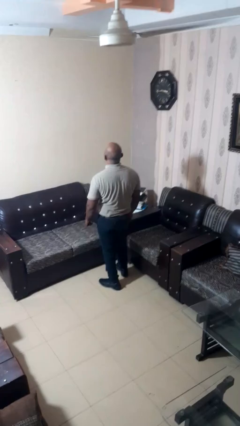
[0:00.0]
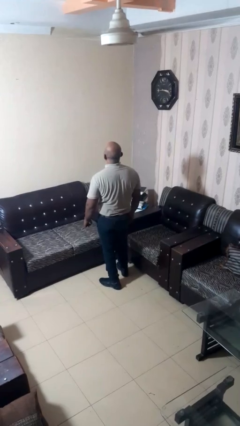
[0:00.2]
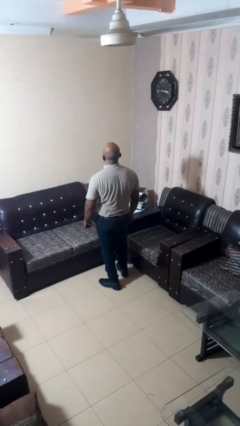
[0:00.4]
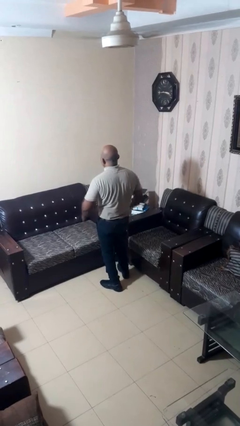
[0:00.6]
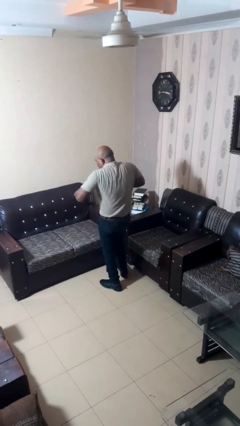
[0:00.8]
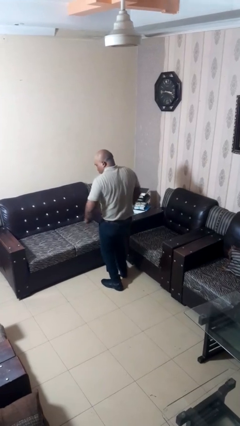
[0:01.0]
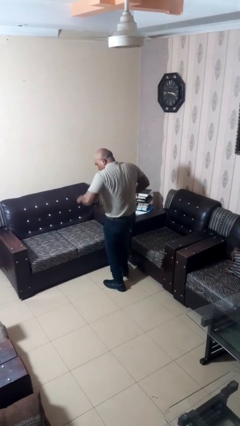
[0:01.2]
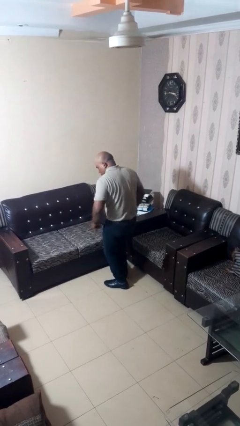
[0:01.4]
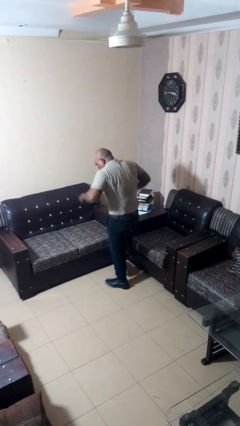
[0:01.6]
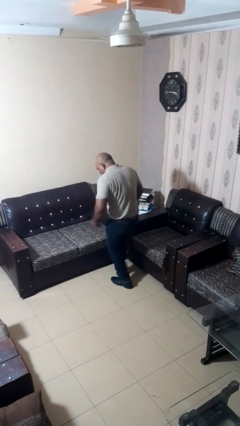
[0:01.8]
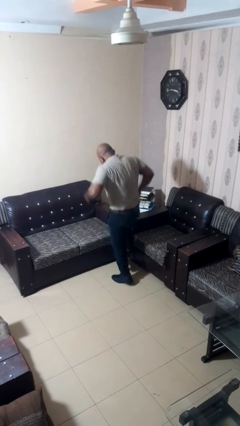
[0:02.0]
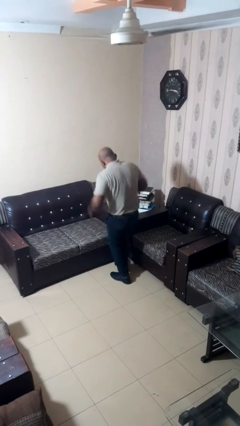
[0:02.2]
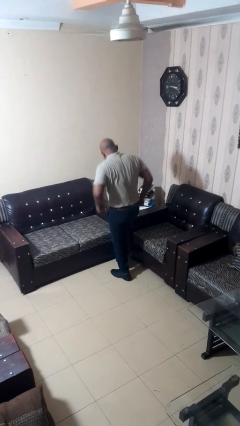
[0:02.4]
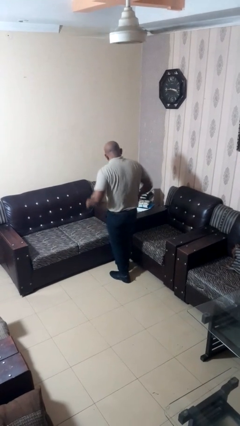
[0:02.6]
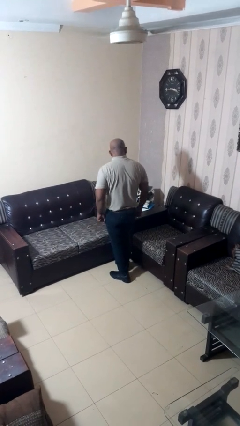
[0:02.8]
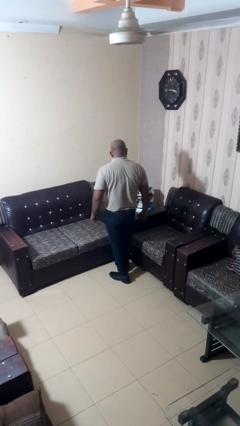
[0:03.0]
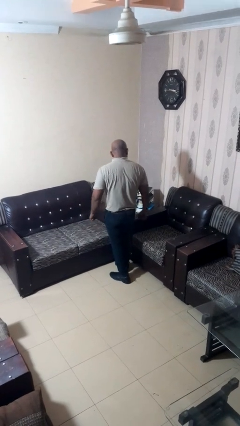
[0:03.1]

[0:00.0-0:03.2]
person dances in place

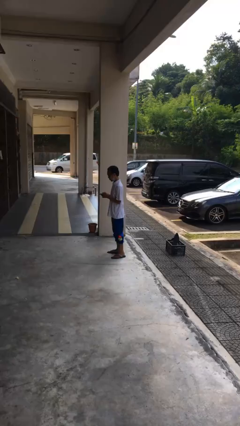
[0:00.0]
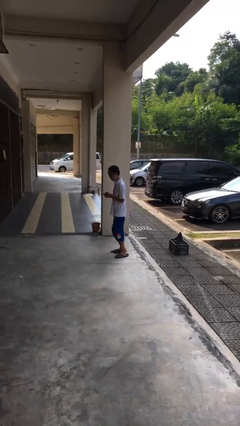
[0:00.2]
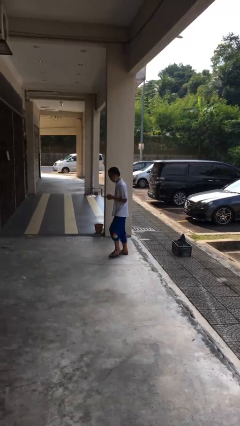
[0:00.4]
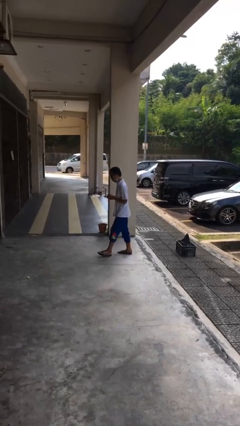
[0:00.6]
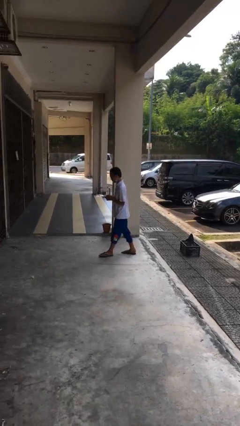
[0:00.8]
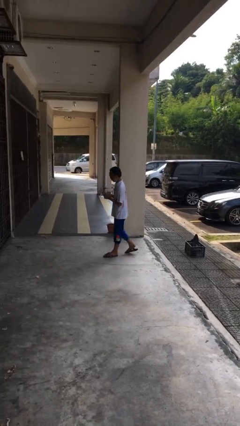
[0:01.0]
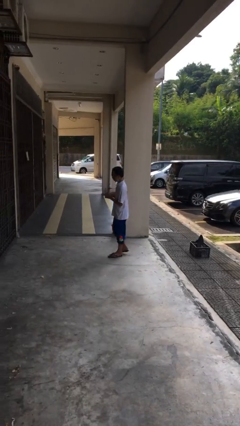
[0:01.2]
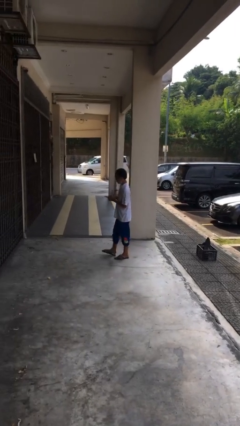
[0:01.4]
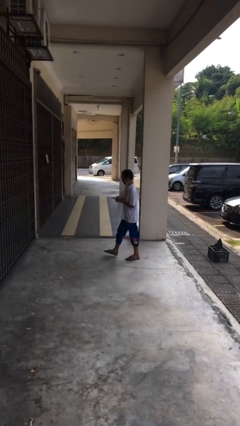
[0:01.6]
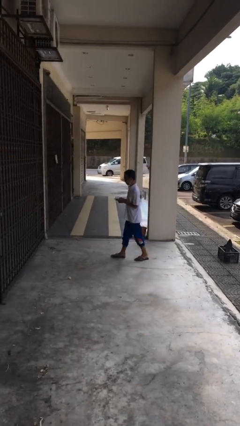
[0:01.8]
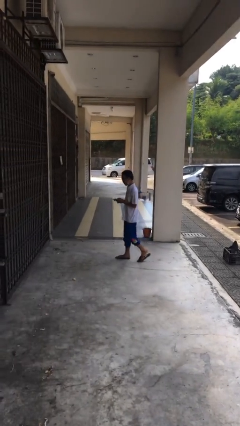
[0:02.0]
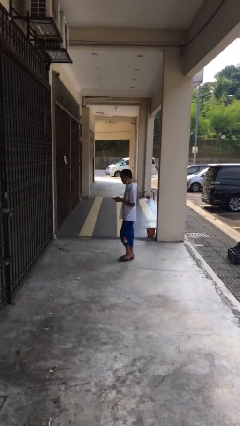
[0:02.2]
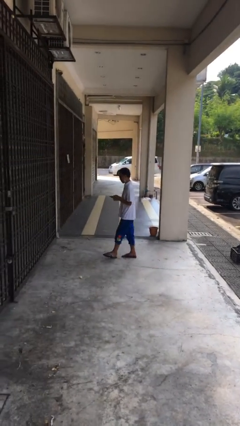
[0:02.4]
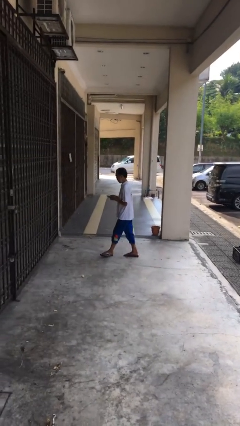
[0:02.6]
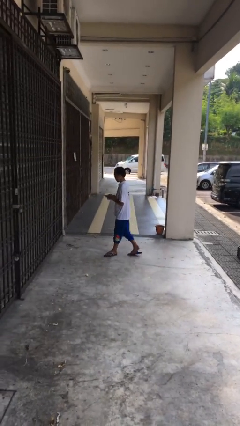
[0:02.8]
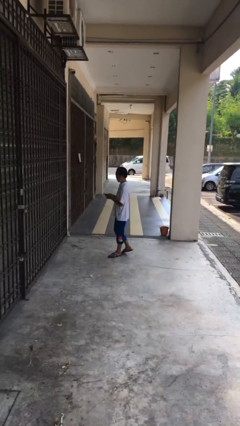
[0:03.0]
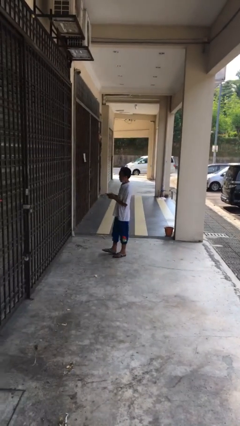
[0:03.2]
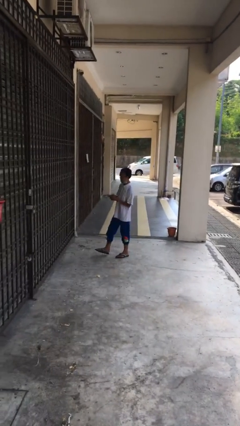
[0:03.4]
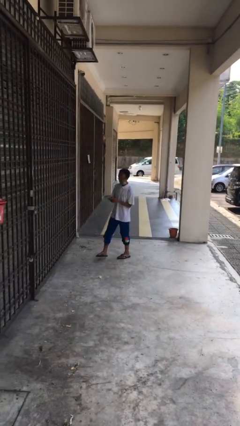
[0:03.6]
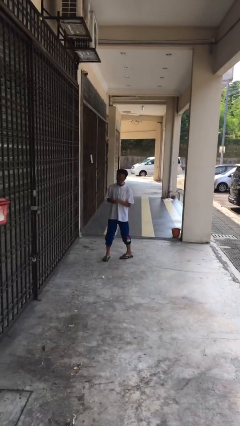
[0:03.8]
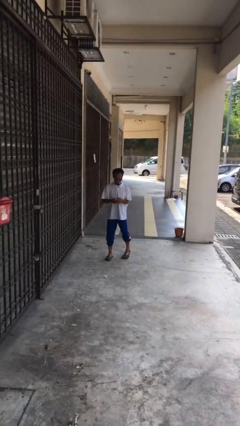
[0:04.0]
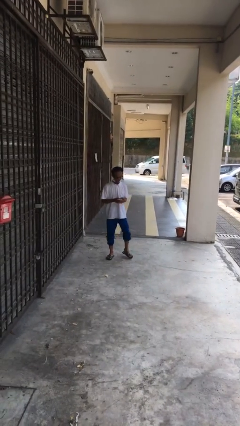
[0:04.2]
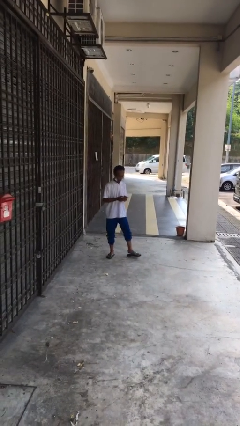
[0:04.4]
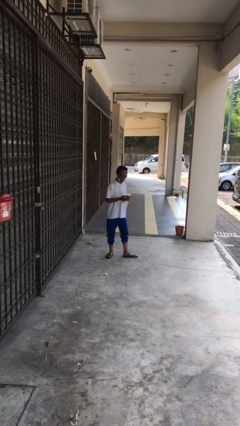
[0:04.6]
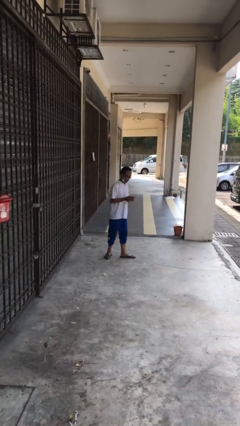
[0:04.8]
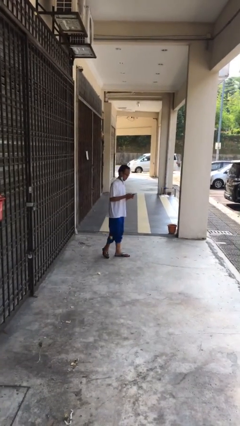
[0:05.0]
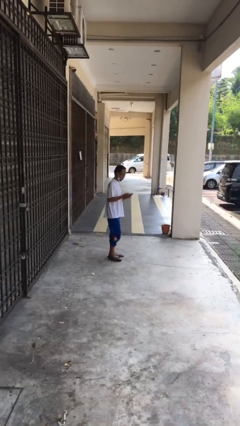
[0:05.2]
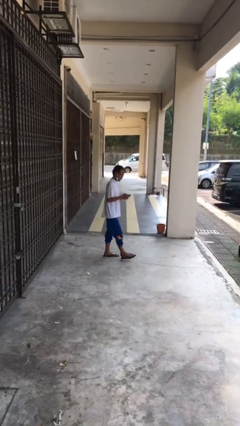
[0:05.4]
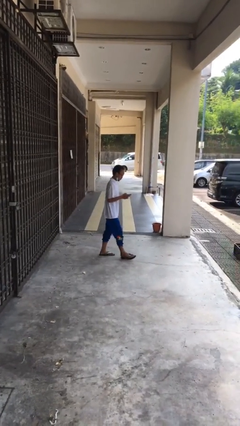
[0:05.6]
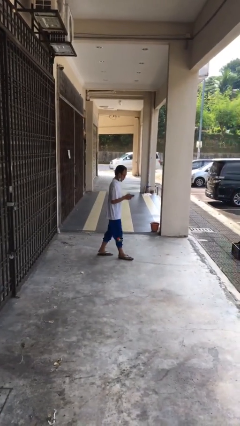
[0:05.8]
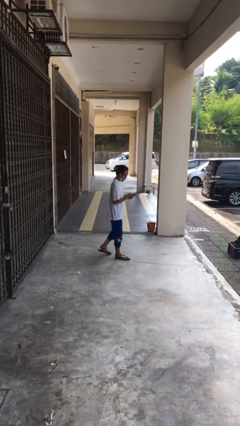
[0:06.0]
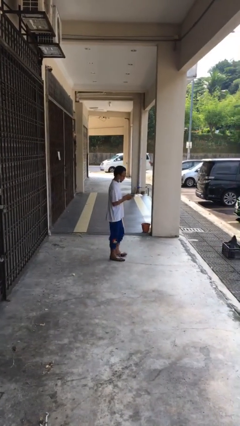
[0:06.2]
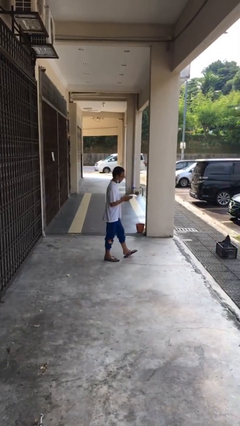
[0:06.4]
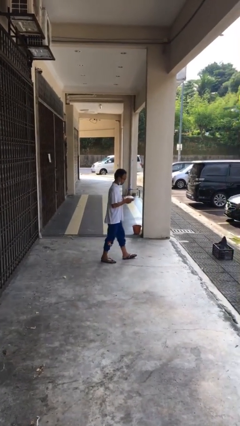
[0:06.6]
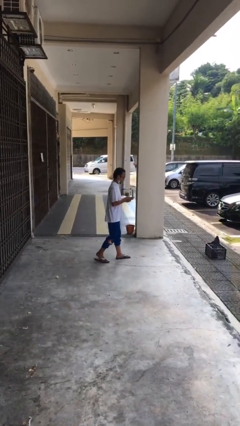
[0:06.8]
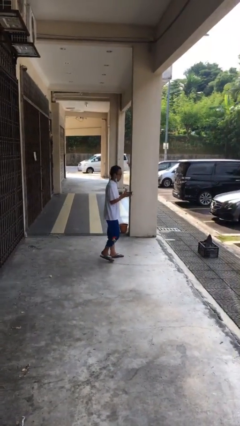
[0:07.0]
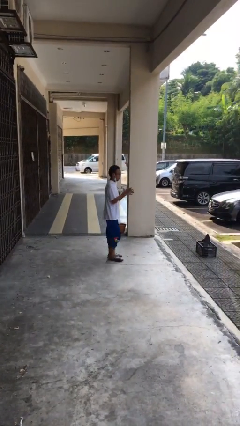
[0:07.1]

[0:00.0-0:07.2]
person texts on phone

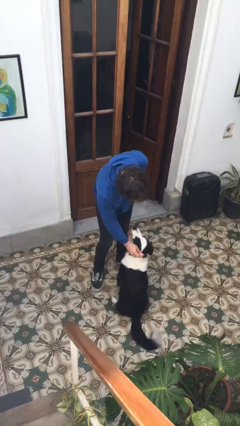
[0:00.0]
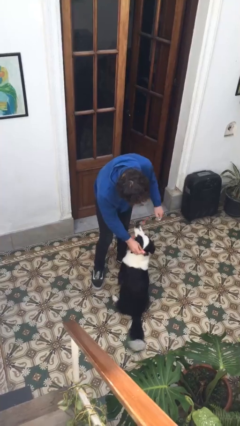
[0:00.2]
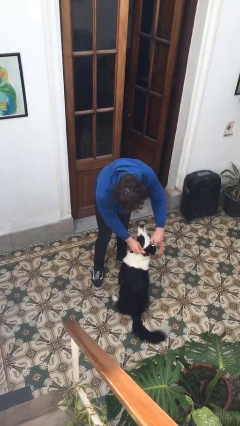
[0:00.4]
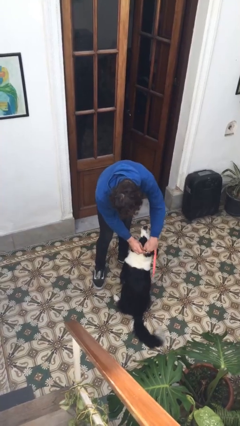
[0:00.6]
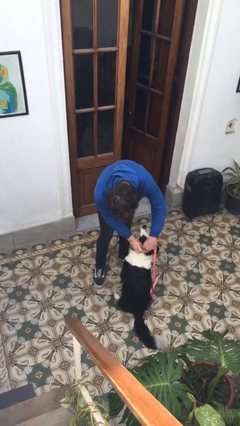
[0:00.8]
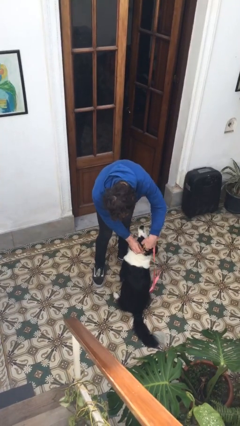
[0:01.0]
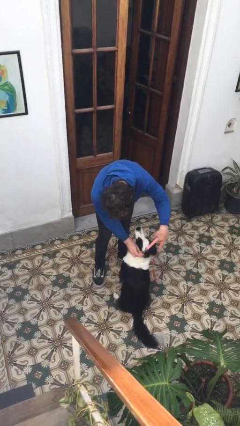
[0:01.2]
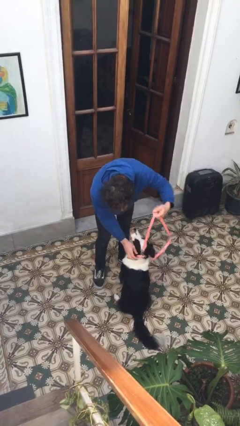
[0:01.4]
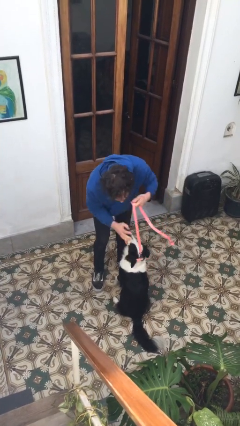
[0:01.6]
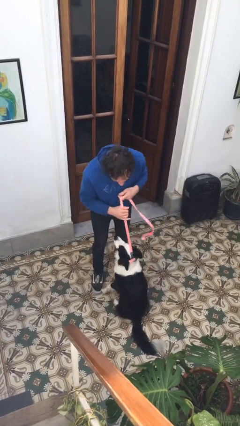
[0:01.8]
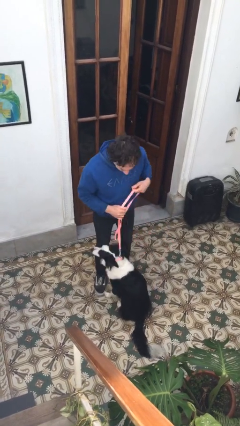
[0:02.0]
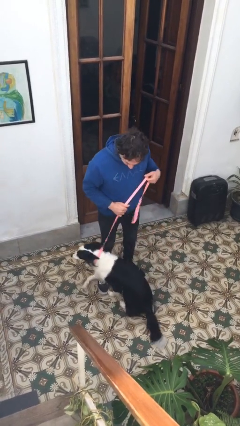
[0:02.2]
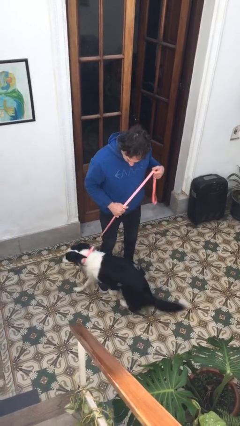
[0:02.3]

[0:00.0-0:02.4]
person attaches leash to dog

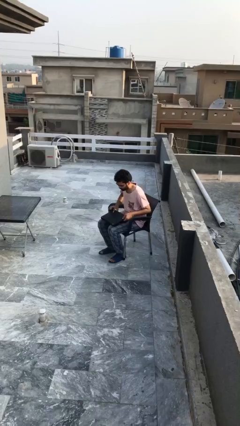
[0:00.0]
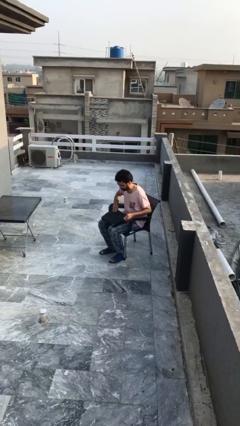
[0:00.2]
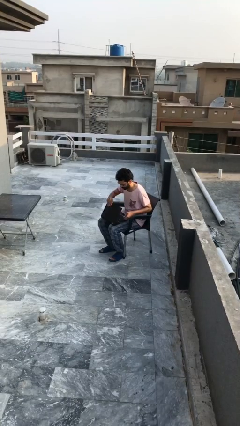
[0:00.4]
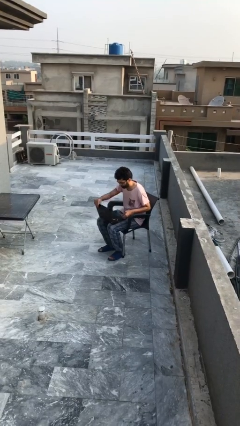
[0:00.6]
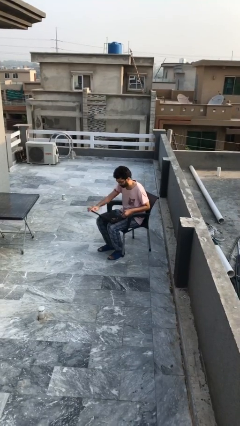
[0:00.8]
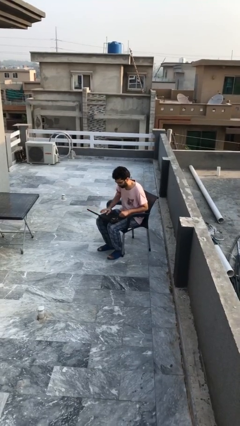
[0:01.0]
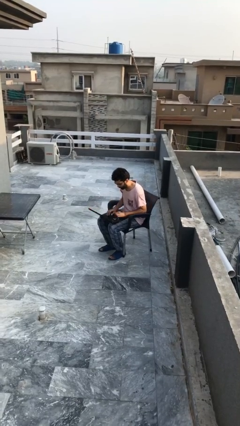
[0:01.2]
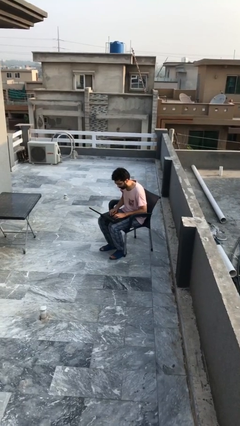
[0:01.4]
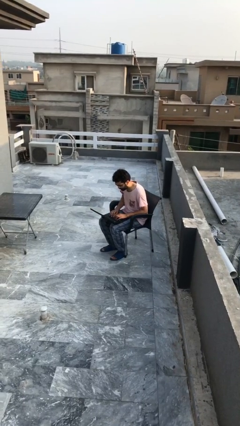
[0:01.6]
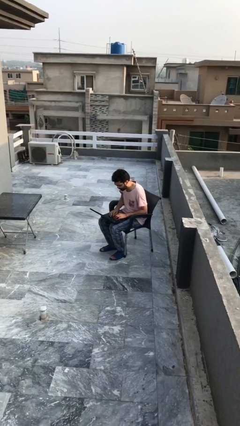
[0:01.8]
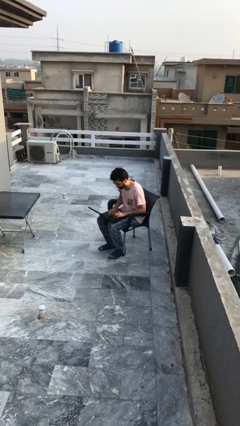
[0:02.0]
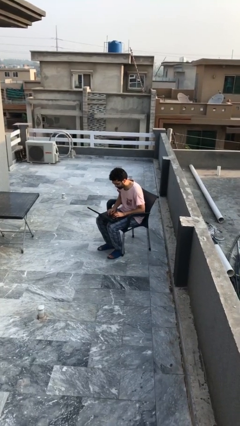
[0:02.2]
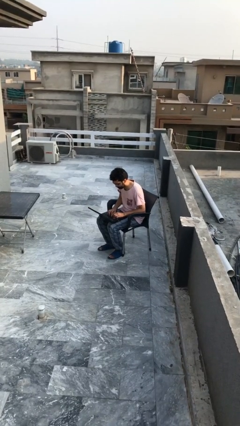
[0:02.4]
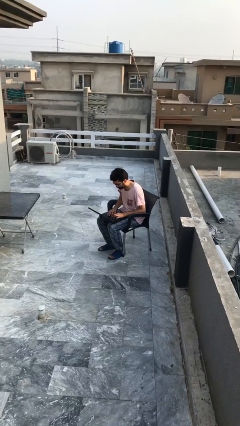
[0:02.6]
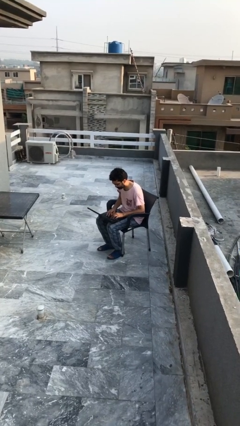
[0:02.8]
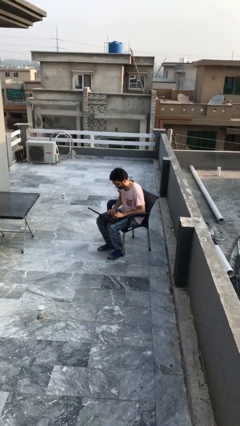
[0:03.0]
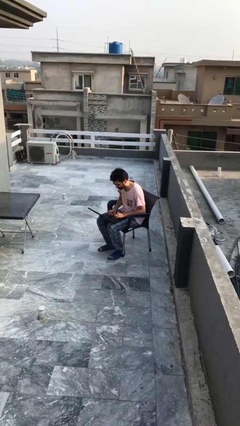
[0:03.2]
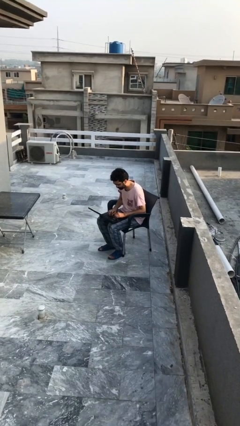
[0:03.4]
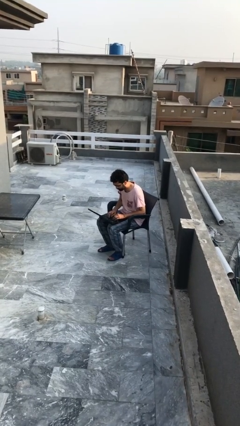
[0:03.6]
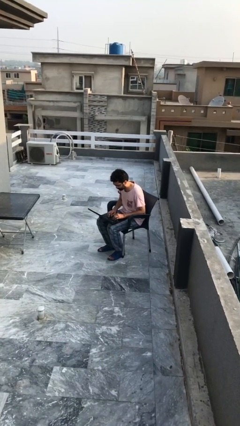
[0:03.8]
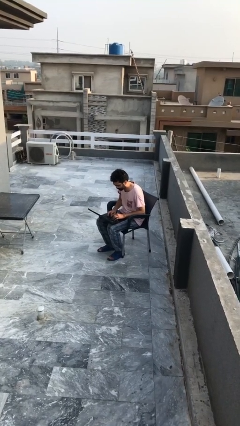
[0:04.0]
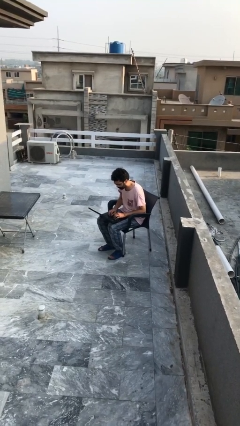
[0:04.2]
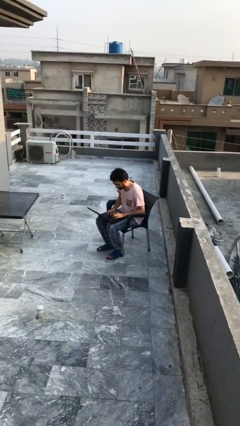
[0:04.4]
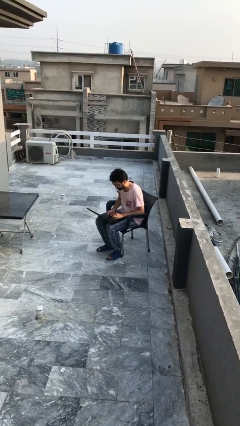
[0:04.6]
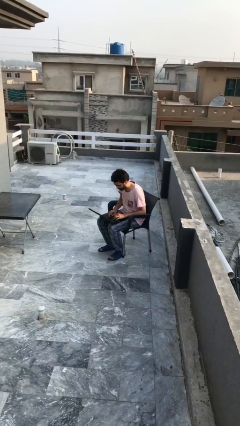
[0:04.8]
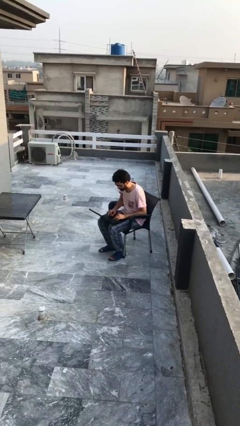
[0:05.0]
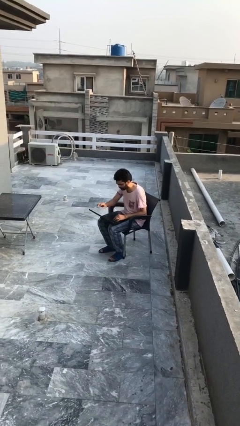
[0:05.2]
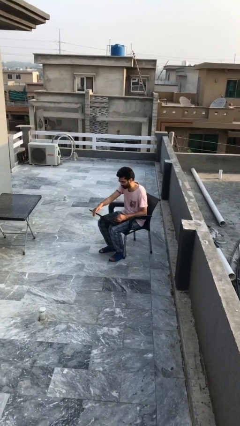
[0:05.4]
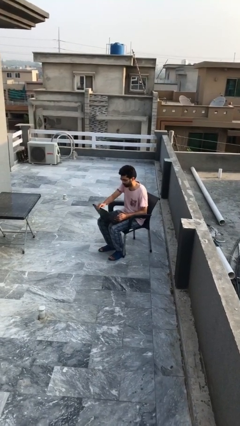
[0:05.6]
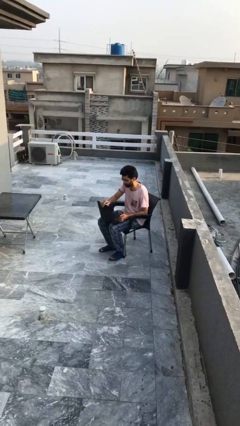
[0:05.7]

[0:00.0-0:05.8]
person interacts with laptop
